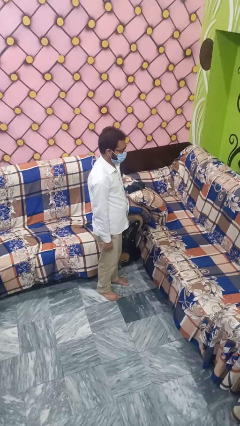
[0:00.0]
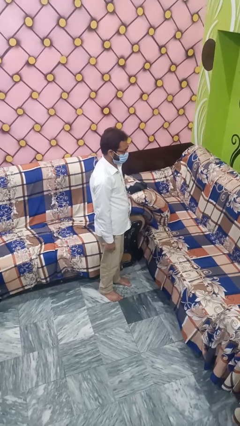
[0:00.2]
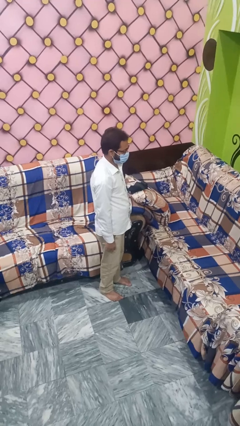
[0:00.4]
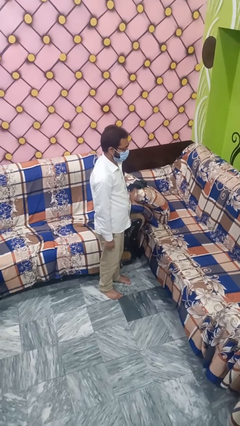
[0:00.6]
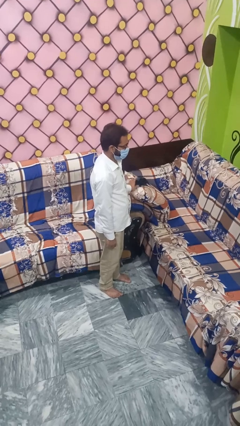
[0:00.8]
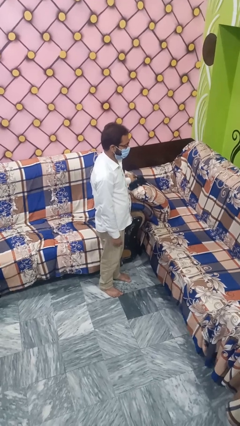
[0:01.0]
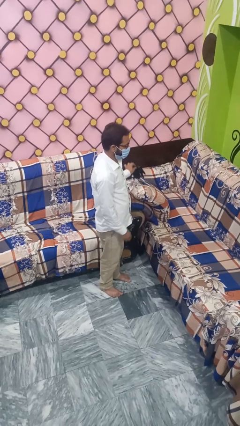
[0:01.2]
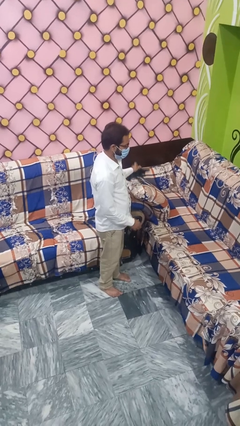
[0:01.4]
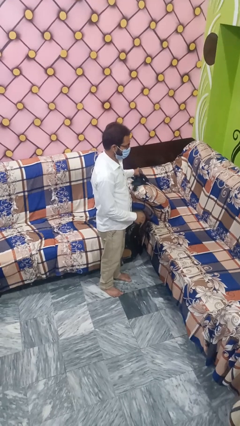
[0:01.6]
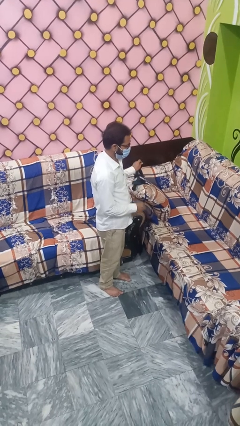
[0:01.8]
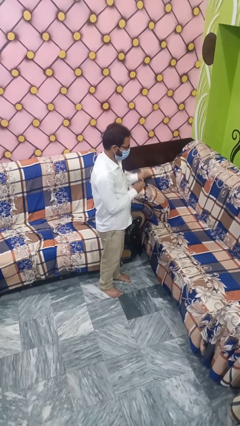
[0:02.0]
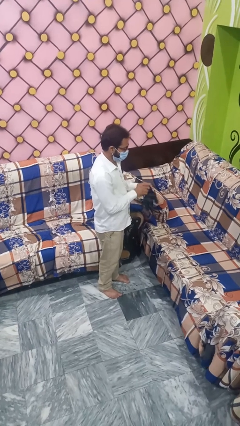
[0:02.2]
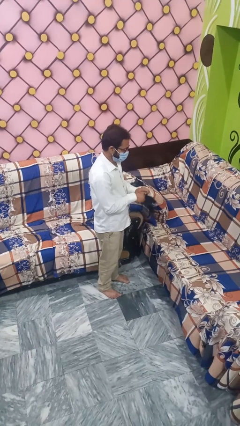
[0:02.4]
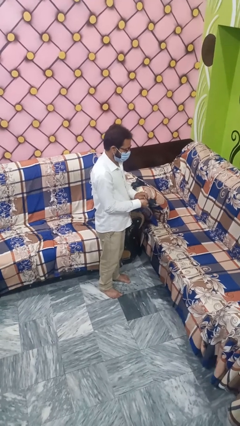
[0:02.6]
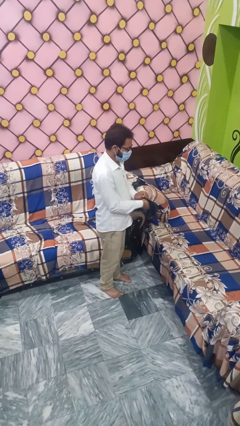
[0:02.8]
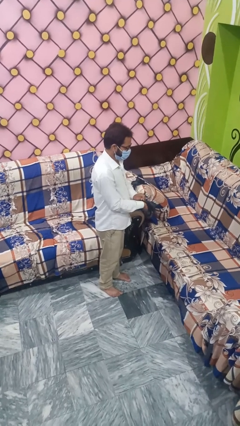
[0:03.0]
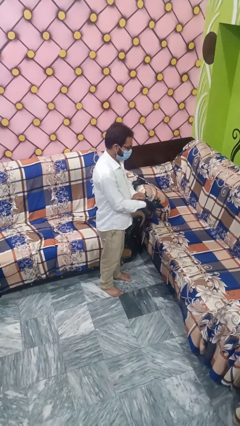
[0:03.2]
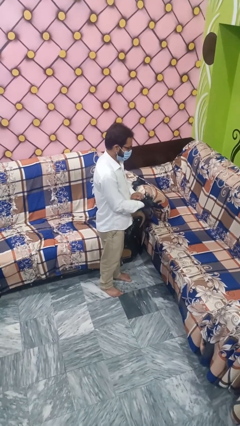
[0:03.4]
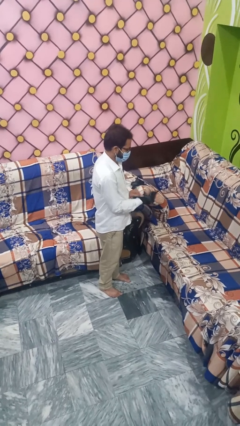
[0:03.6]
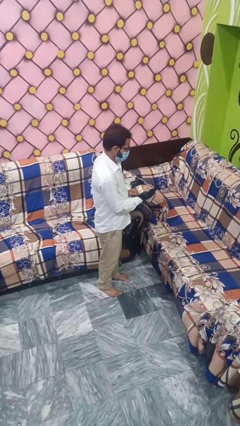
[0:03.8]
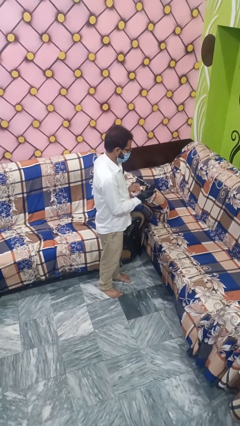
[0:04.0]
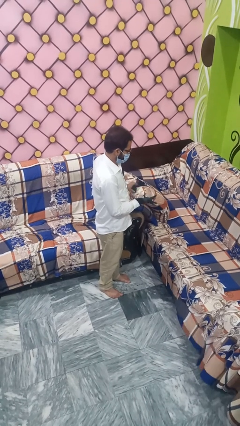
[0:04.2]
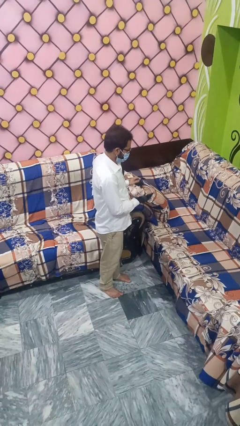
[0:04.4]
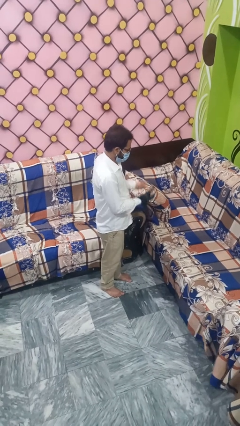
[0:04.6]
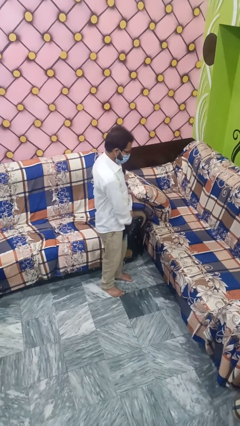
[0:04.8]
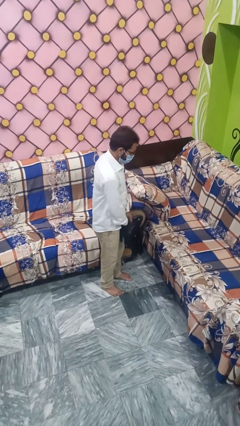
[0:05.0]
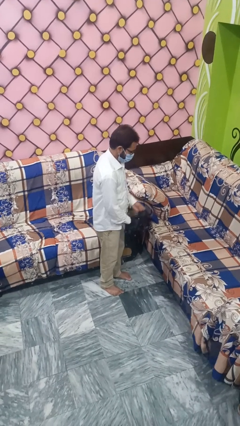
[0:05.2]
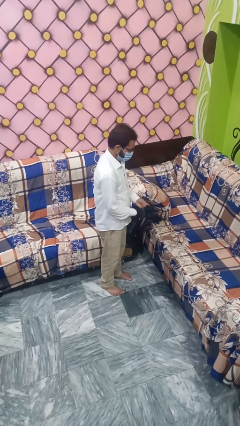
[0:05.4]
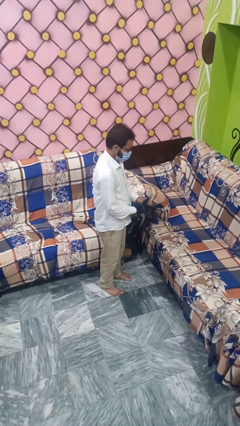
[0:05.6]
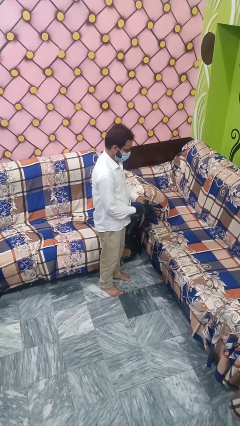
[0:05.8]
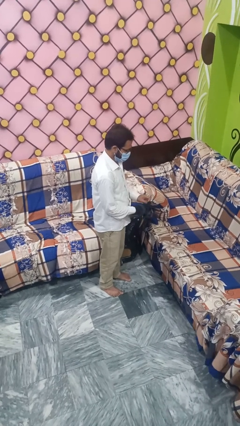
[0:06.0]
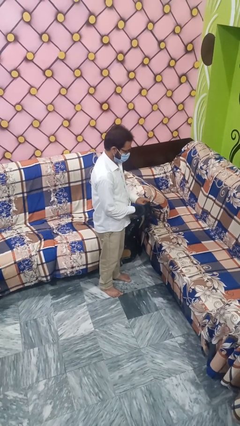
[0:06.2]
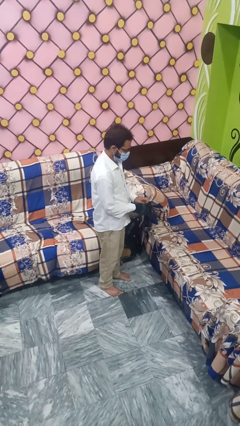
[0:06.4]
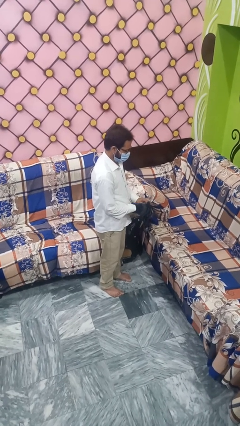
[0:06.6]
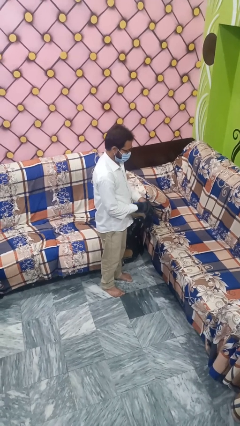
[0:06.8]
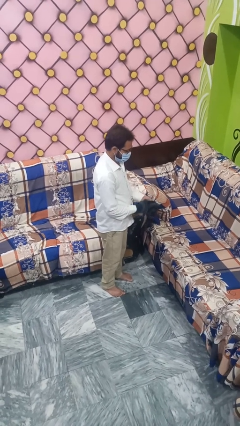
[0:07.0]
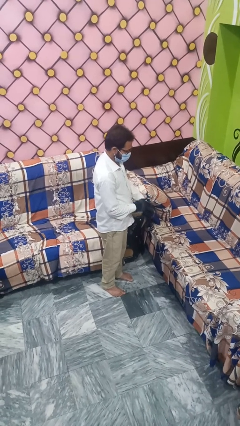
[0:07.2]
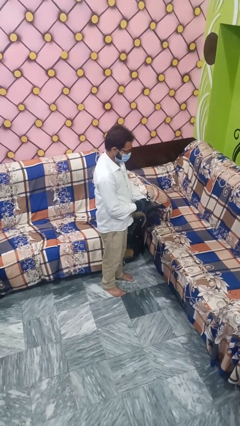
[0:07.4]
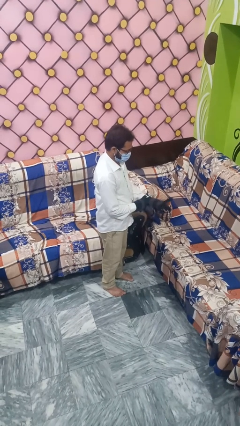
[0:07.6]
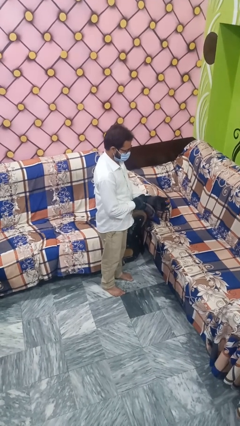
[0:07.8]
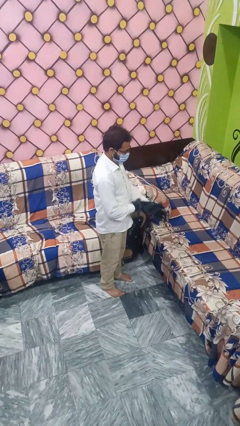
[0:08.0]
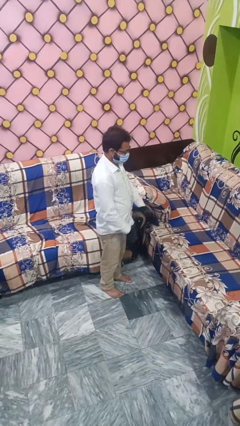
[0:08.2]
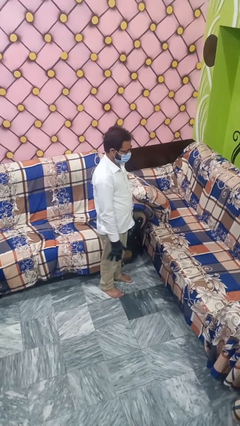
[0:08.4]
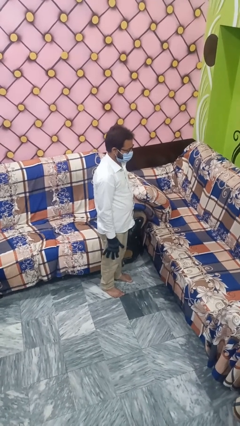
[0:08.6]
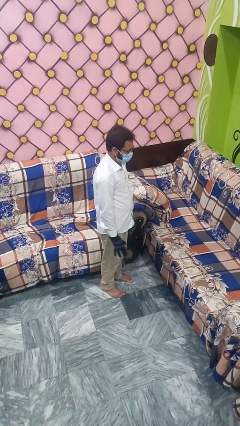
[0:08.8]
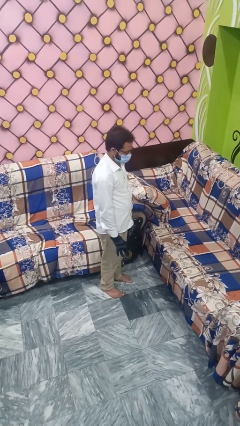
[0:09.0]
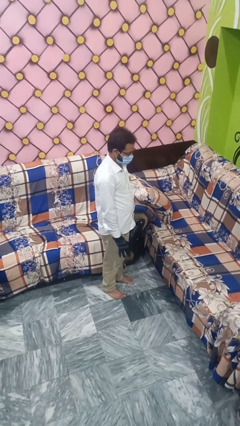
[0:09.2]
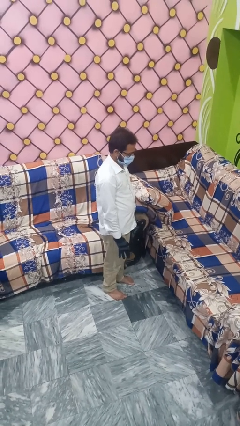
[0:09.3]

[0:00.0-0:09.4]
person puts on gloves

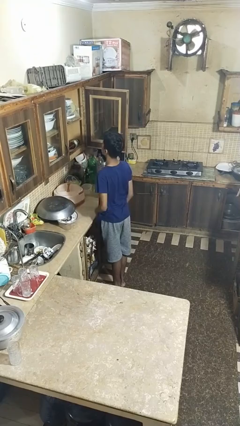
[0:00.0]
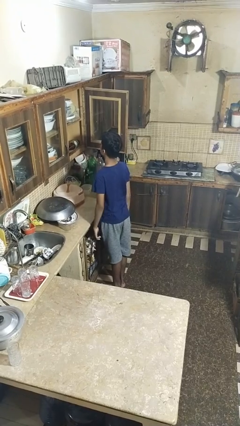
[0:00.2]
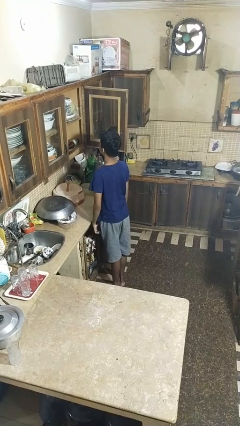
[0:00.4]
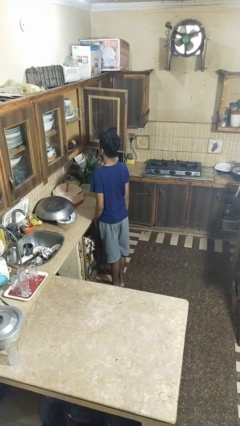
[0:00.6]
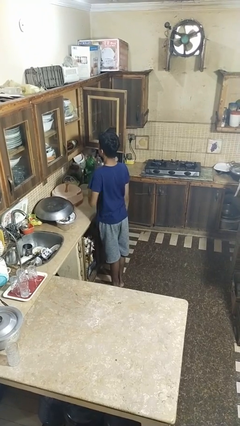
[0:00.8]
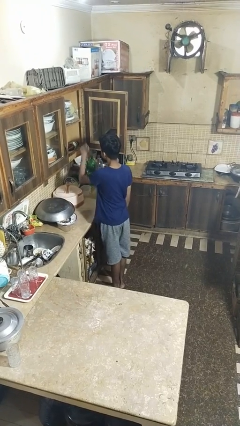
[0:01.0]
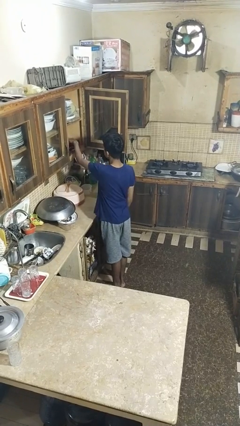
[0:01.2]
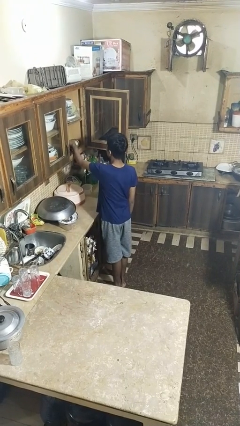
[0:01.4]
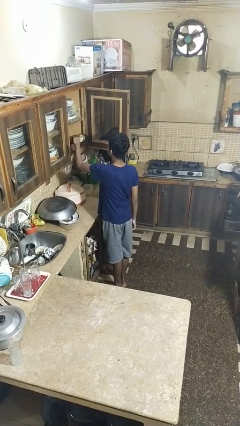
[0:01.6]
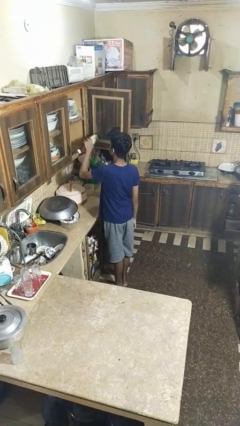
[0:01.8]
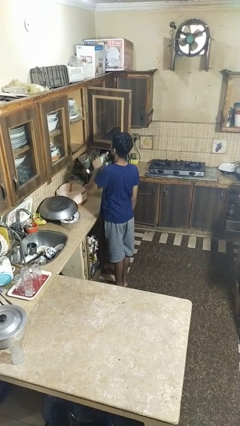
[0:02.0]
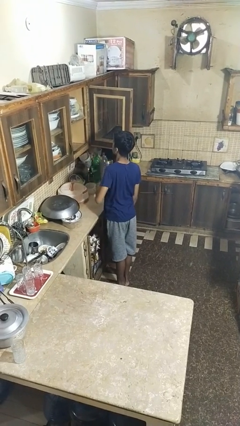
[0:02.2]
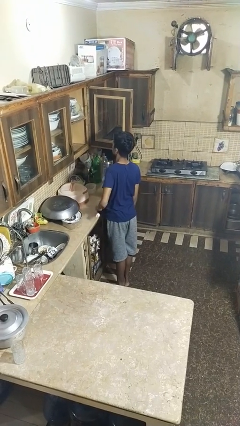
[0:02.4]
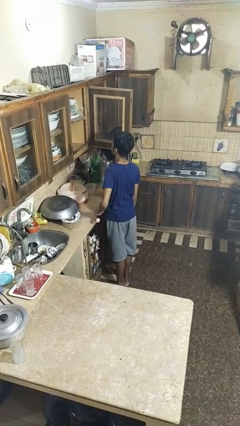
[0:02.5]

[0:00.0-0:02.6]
person takes object from cabinet

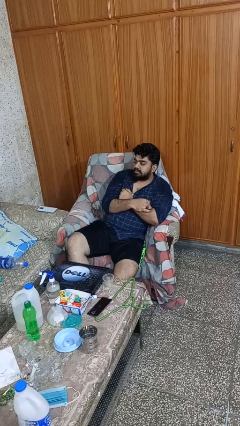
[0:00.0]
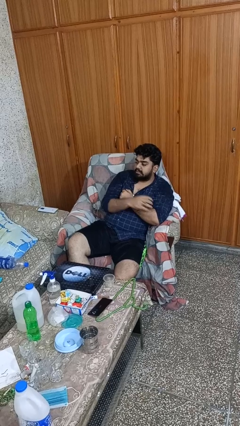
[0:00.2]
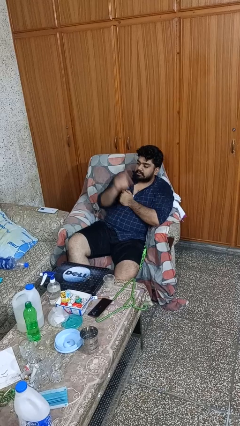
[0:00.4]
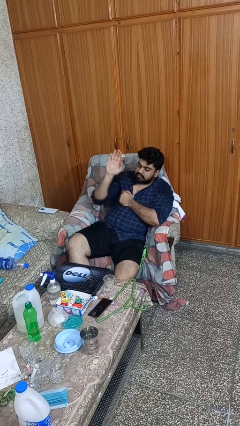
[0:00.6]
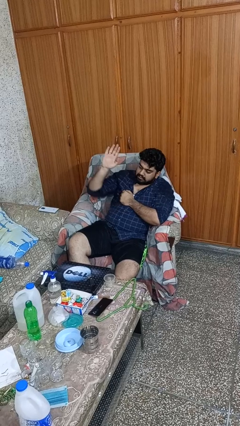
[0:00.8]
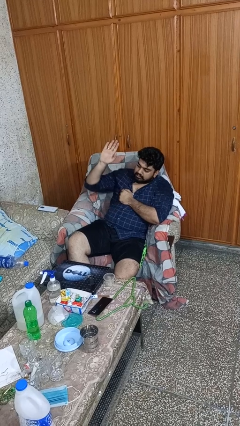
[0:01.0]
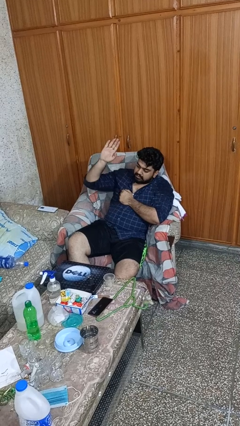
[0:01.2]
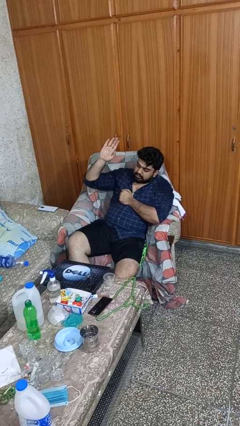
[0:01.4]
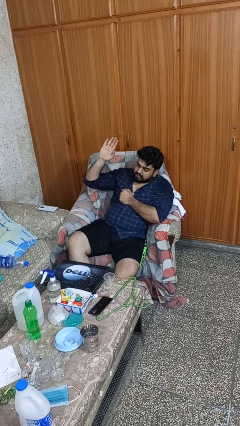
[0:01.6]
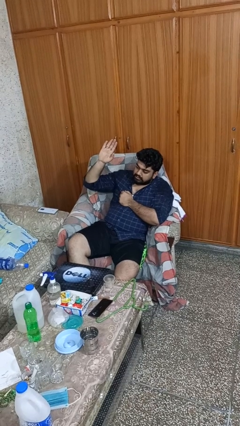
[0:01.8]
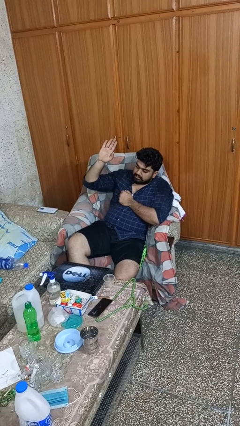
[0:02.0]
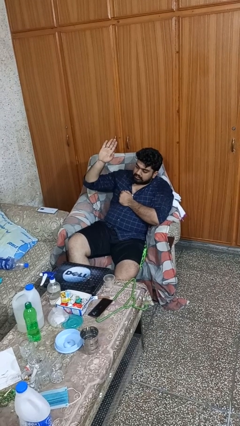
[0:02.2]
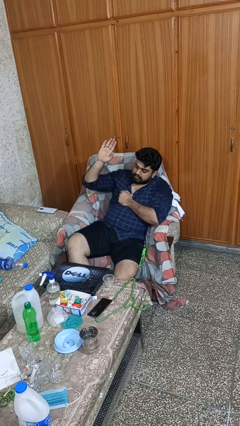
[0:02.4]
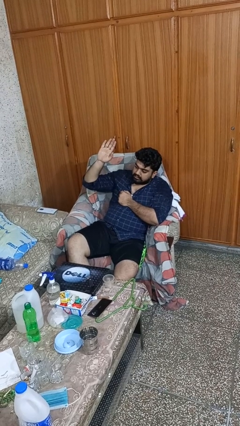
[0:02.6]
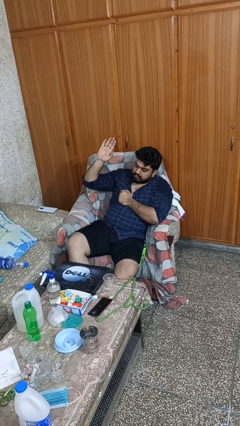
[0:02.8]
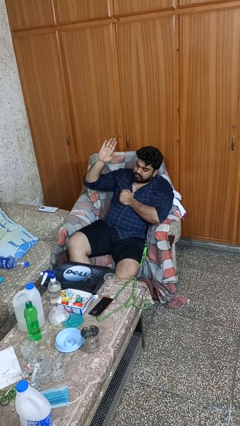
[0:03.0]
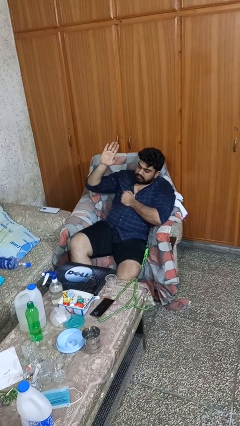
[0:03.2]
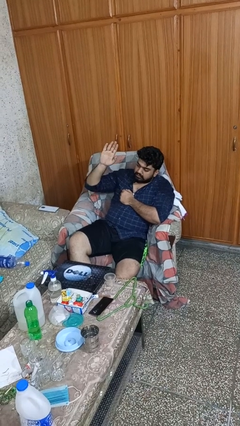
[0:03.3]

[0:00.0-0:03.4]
person gestures raise hand

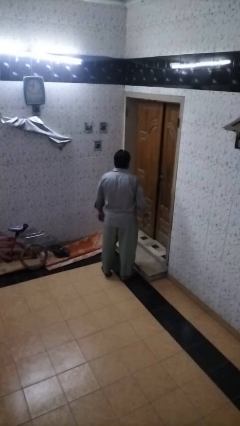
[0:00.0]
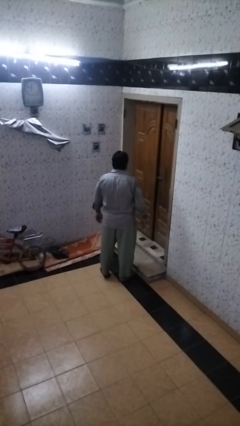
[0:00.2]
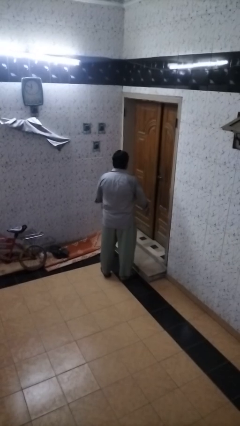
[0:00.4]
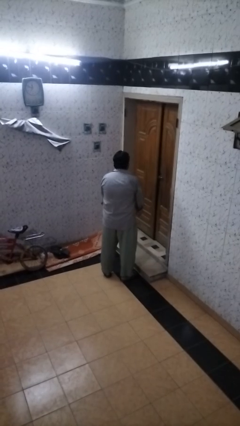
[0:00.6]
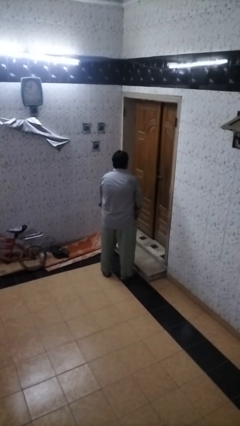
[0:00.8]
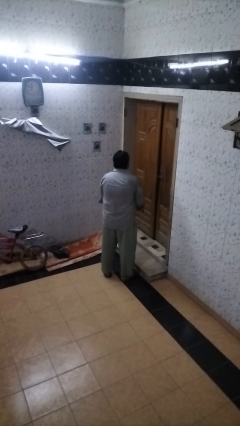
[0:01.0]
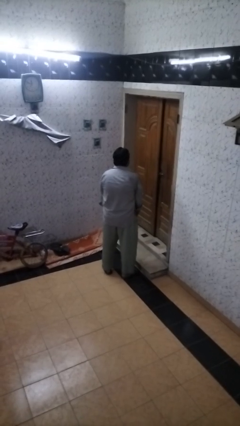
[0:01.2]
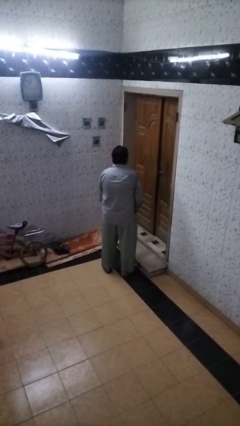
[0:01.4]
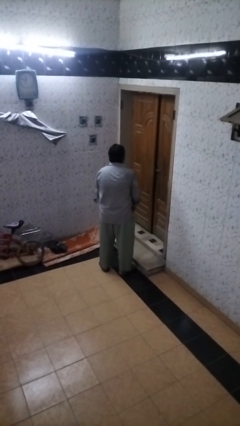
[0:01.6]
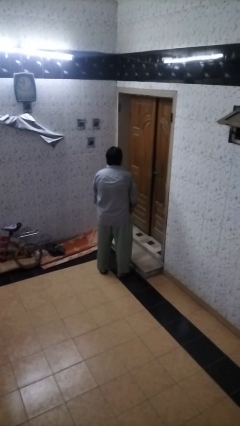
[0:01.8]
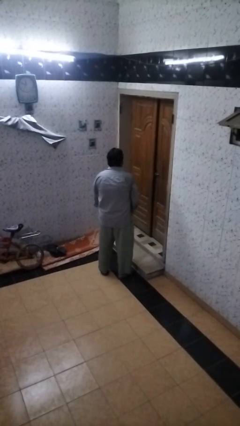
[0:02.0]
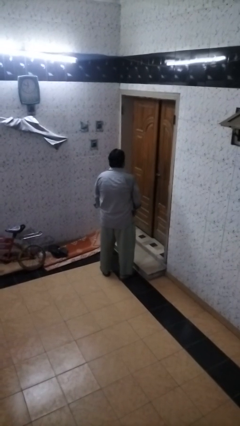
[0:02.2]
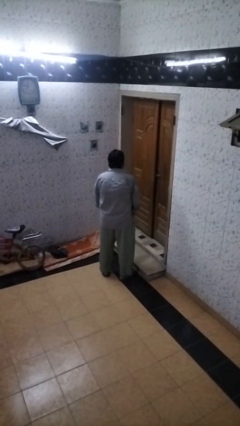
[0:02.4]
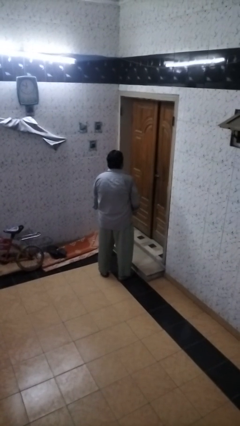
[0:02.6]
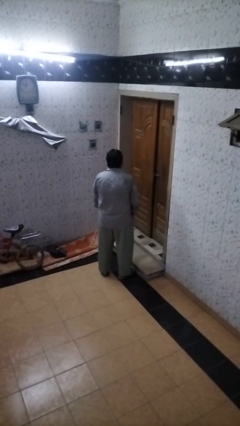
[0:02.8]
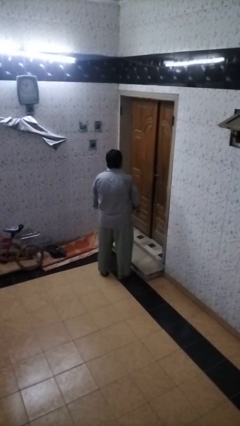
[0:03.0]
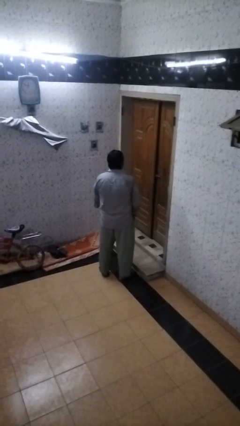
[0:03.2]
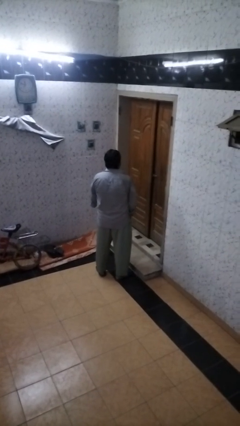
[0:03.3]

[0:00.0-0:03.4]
person slaps hands on thighs
